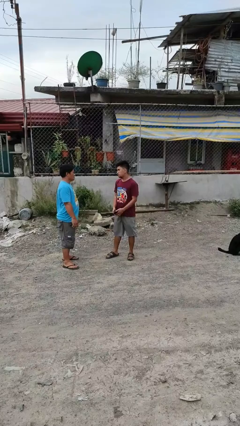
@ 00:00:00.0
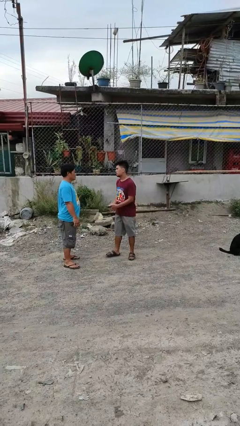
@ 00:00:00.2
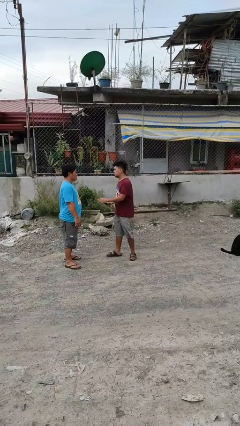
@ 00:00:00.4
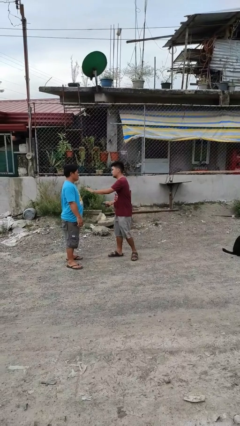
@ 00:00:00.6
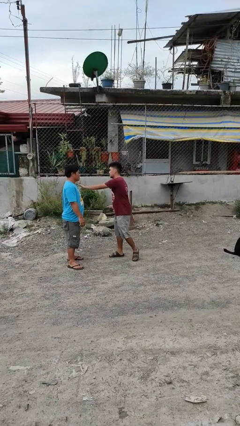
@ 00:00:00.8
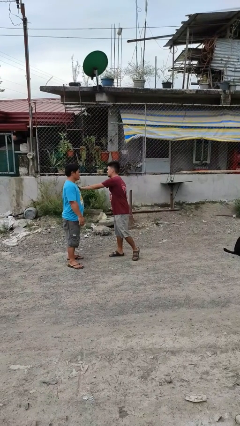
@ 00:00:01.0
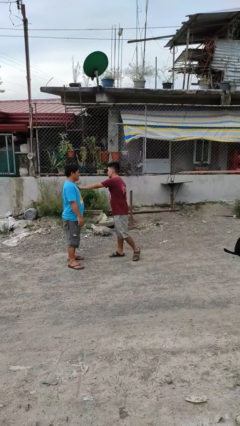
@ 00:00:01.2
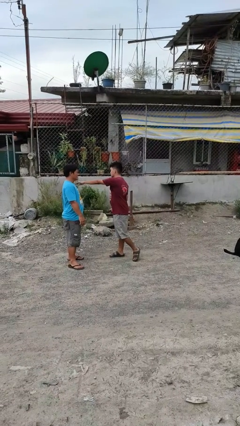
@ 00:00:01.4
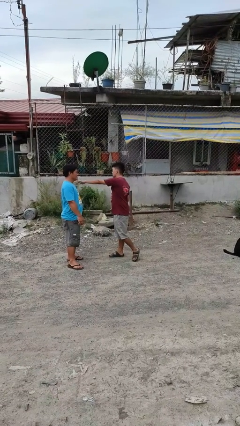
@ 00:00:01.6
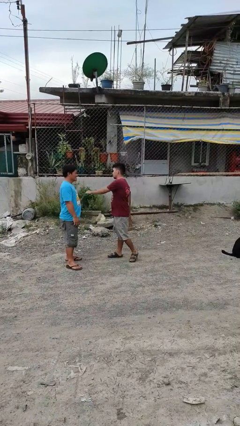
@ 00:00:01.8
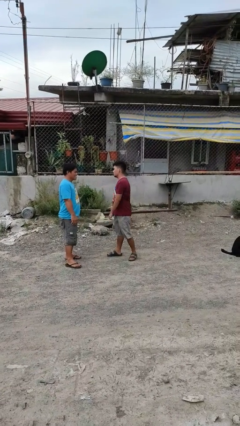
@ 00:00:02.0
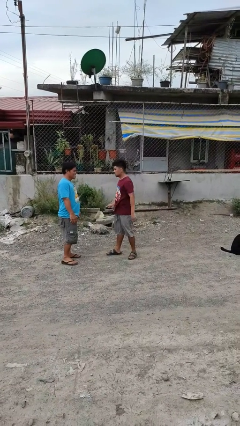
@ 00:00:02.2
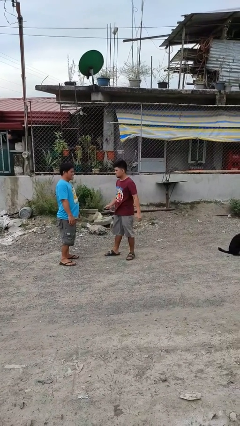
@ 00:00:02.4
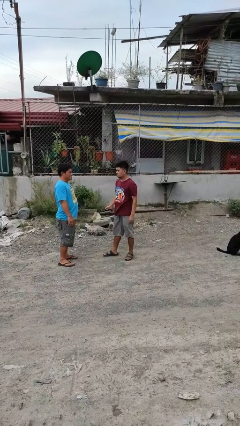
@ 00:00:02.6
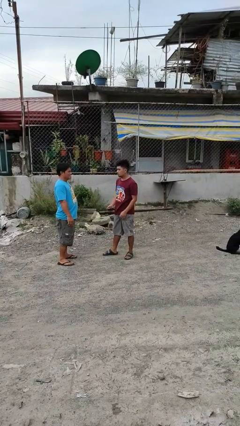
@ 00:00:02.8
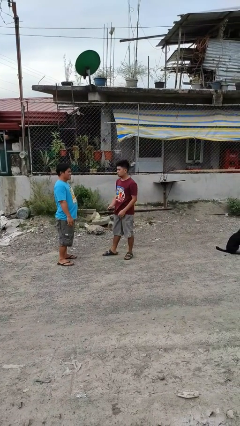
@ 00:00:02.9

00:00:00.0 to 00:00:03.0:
person shoves person

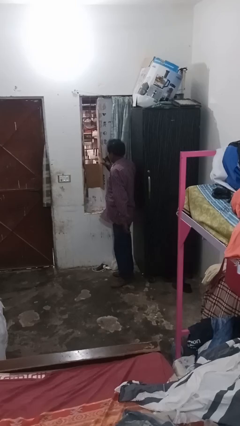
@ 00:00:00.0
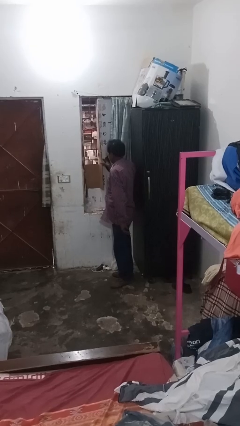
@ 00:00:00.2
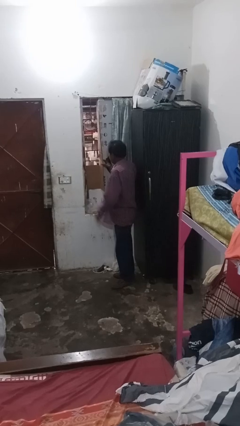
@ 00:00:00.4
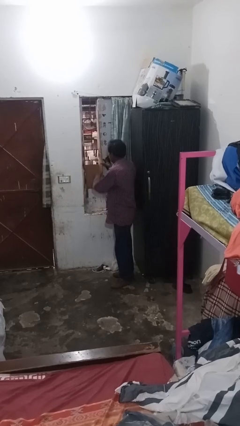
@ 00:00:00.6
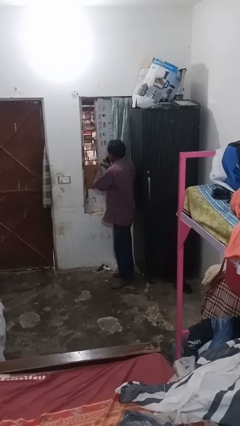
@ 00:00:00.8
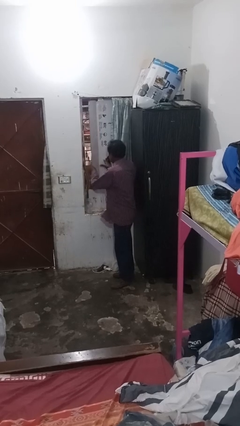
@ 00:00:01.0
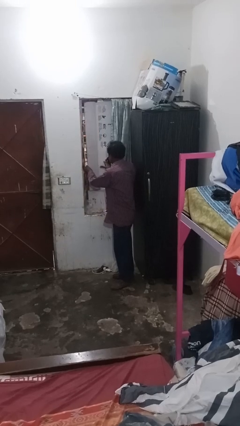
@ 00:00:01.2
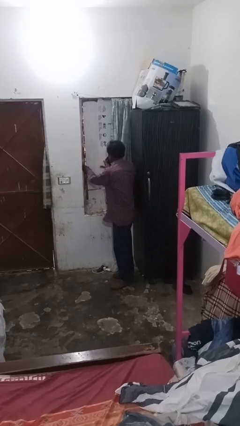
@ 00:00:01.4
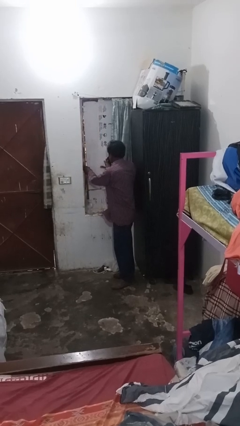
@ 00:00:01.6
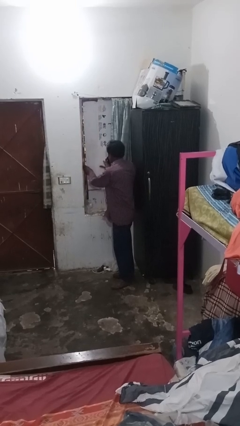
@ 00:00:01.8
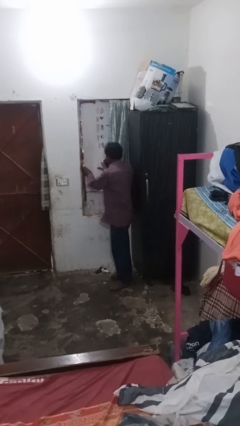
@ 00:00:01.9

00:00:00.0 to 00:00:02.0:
person closes home window

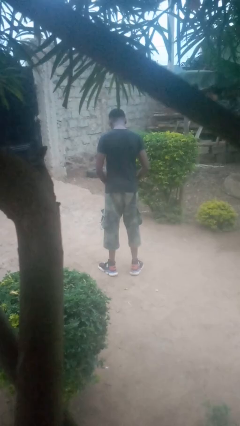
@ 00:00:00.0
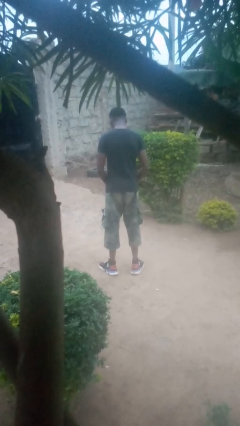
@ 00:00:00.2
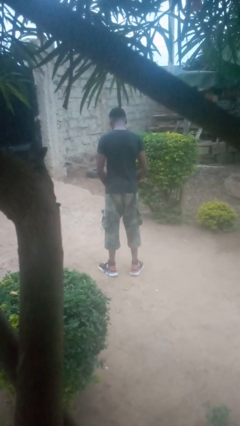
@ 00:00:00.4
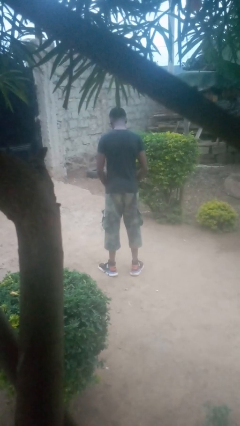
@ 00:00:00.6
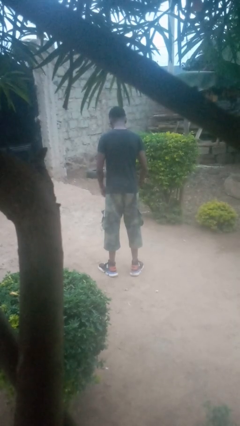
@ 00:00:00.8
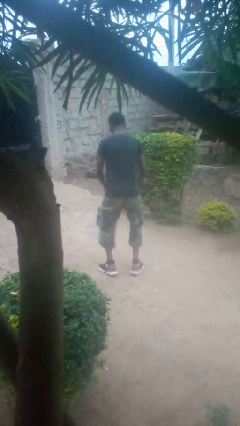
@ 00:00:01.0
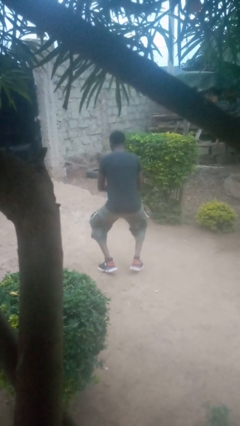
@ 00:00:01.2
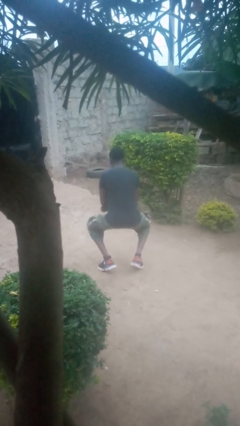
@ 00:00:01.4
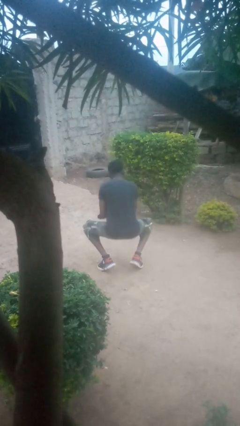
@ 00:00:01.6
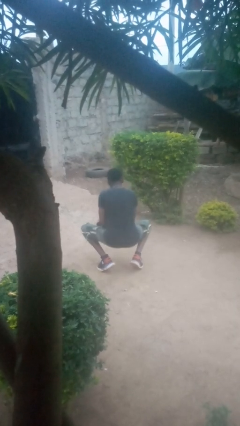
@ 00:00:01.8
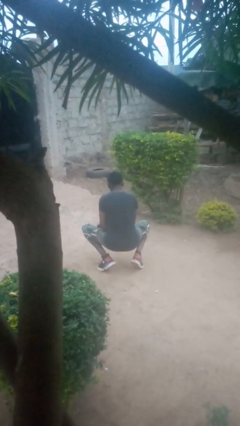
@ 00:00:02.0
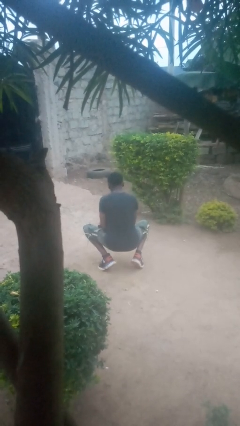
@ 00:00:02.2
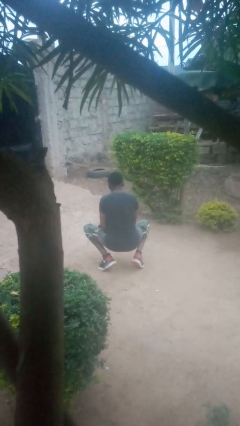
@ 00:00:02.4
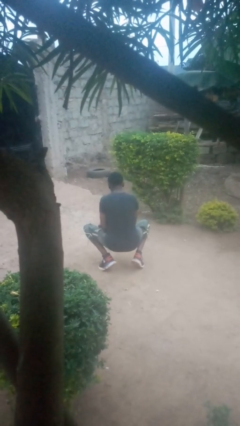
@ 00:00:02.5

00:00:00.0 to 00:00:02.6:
person squats

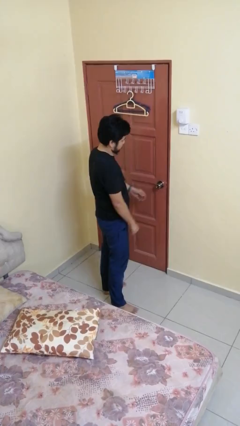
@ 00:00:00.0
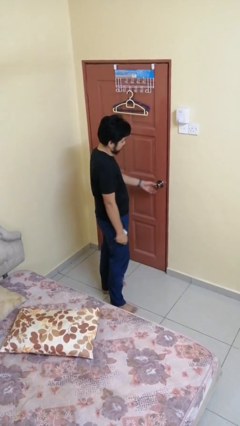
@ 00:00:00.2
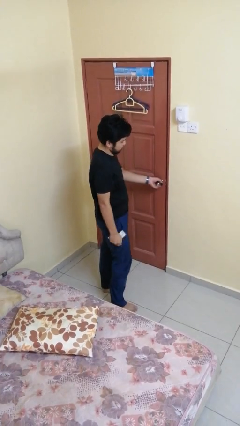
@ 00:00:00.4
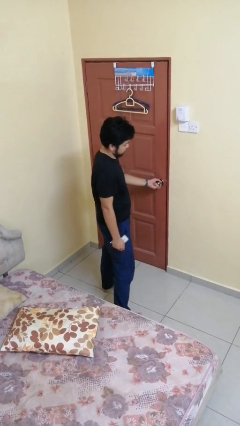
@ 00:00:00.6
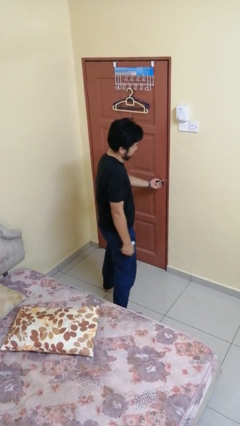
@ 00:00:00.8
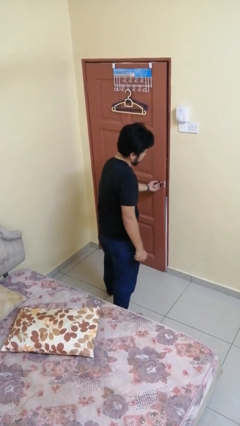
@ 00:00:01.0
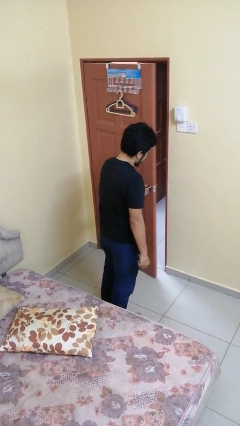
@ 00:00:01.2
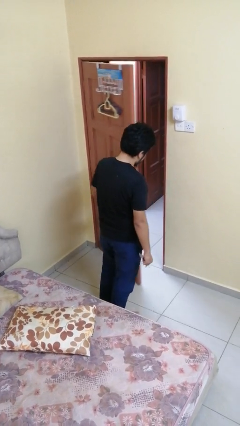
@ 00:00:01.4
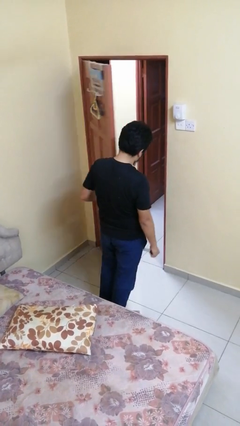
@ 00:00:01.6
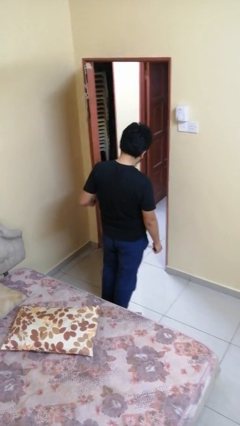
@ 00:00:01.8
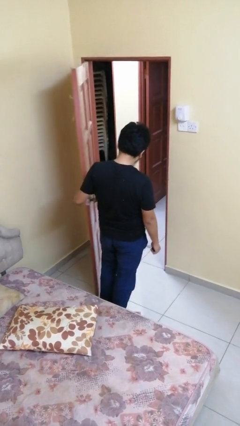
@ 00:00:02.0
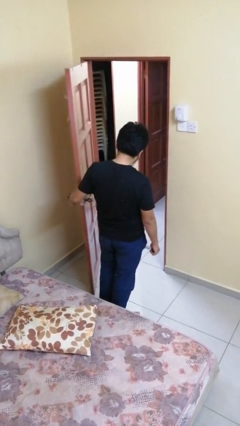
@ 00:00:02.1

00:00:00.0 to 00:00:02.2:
person opens facility door

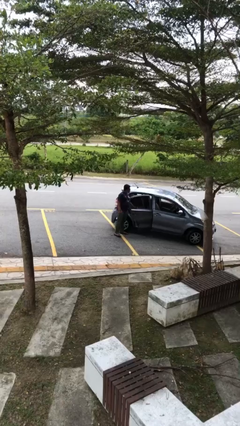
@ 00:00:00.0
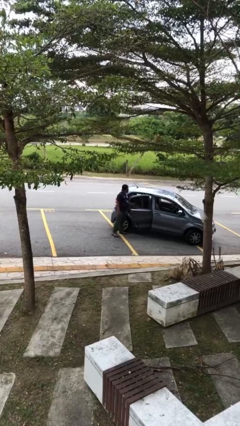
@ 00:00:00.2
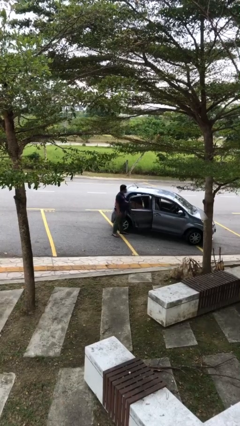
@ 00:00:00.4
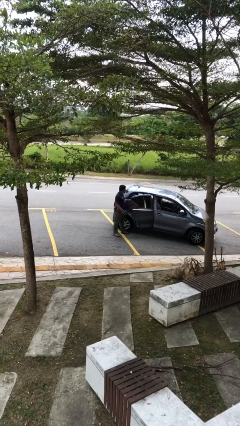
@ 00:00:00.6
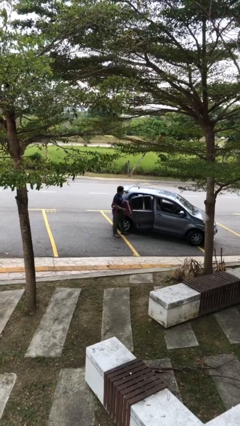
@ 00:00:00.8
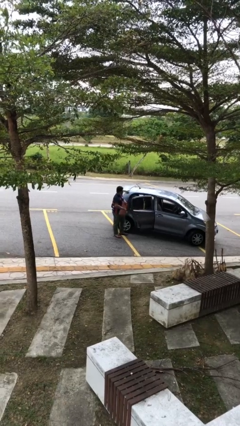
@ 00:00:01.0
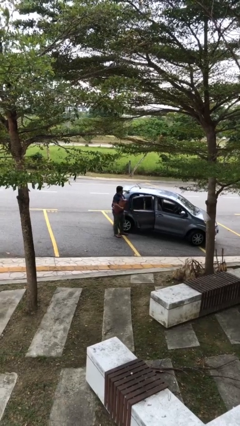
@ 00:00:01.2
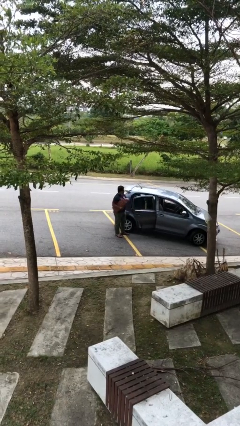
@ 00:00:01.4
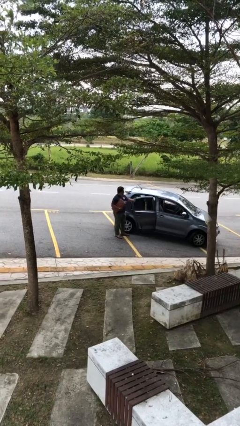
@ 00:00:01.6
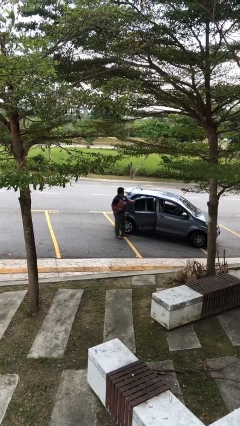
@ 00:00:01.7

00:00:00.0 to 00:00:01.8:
person unloads car

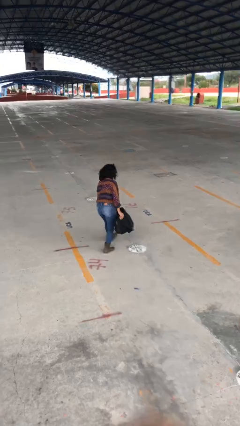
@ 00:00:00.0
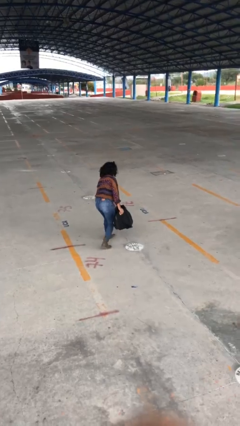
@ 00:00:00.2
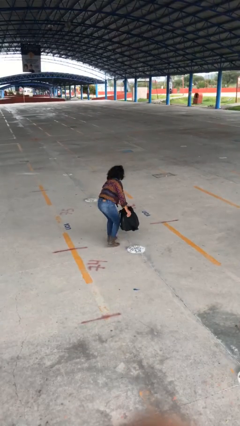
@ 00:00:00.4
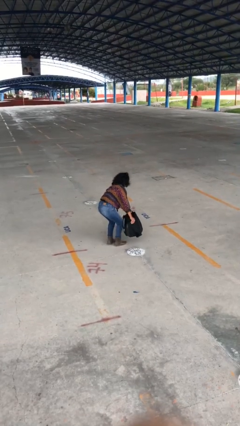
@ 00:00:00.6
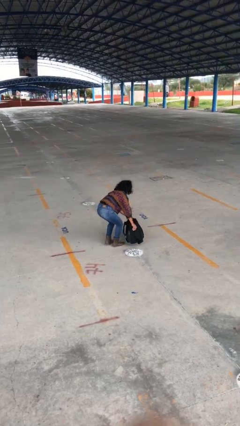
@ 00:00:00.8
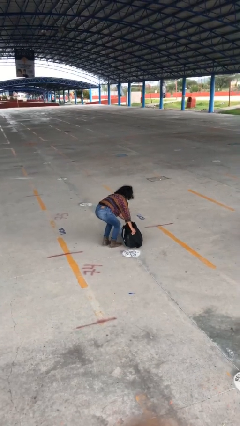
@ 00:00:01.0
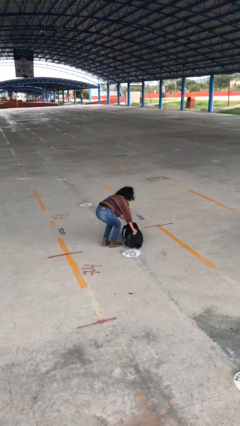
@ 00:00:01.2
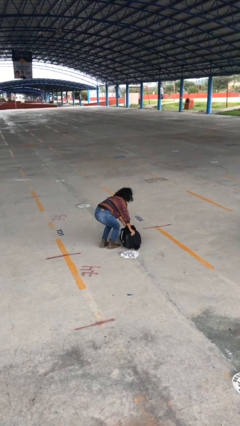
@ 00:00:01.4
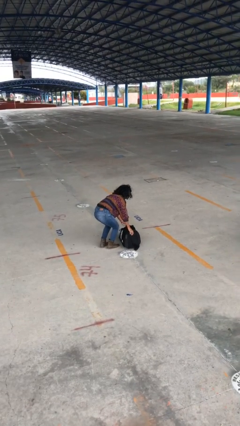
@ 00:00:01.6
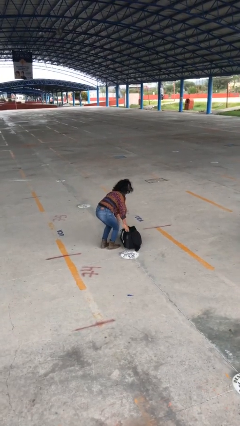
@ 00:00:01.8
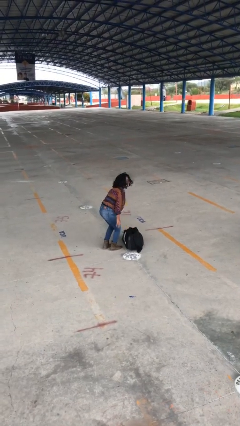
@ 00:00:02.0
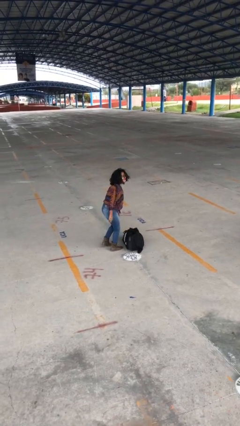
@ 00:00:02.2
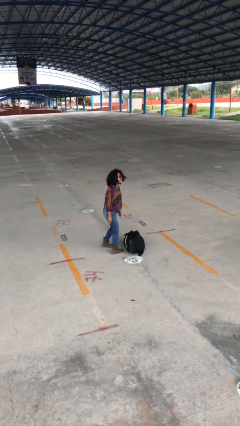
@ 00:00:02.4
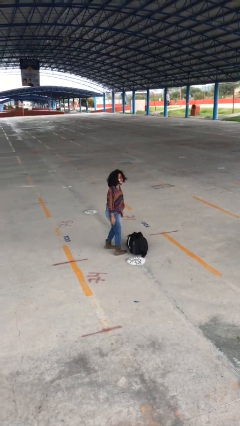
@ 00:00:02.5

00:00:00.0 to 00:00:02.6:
person puts down object on floor

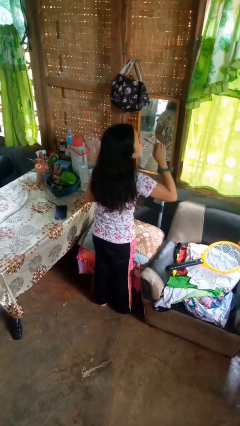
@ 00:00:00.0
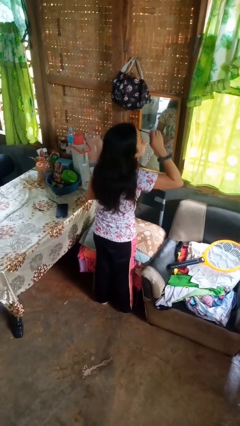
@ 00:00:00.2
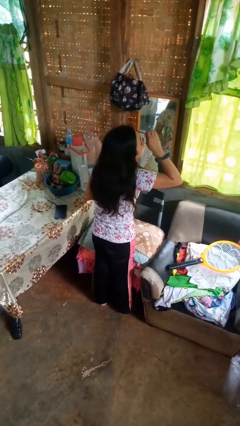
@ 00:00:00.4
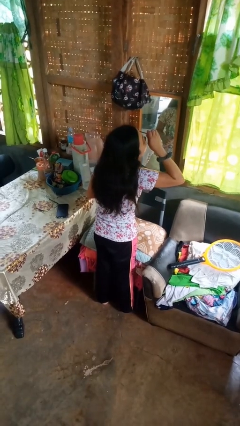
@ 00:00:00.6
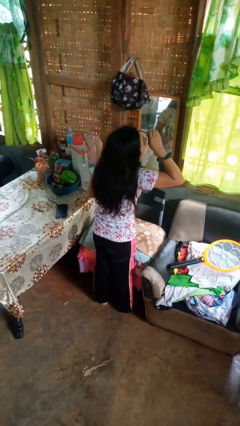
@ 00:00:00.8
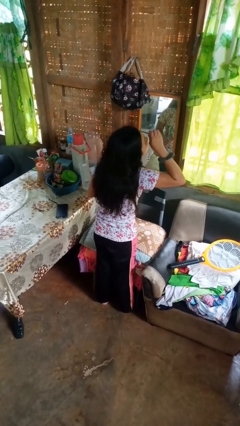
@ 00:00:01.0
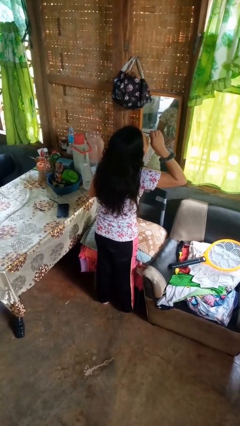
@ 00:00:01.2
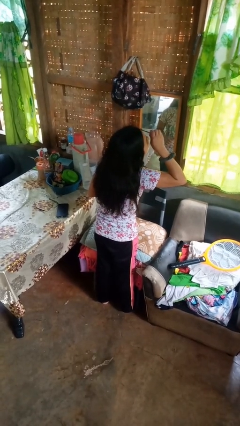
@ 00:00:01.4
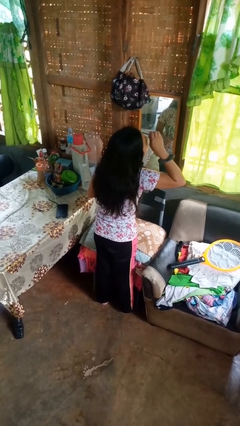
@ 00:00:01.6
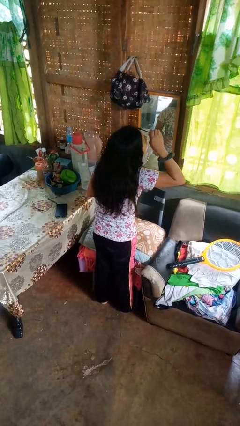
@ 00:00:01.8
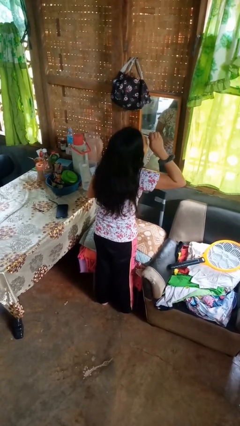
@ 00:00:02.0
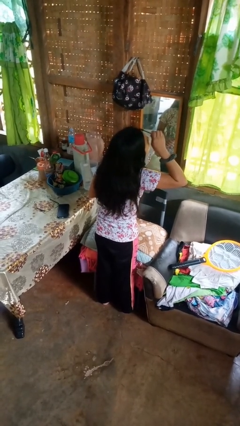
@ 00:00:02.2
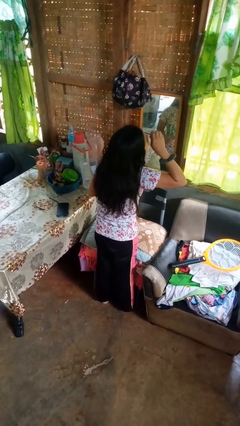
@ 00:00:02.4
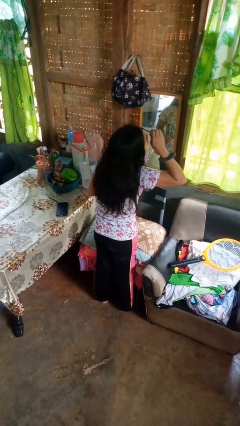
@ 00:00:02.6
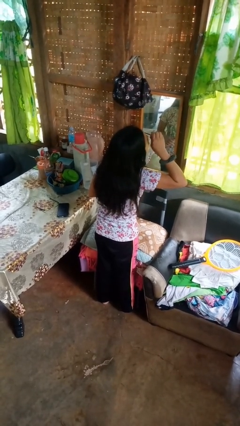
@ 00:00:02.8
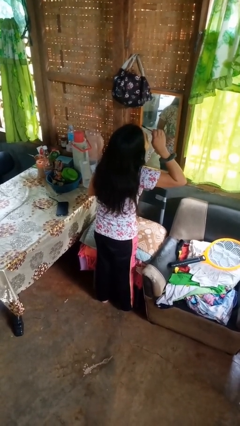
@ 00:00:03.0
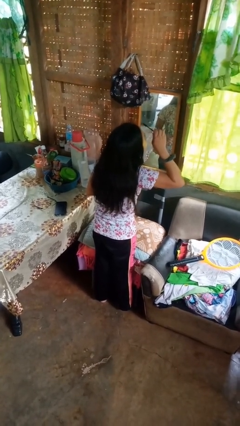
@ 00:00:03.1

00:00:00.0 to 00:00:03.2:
person applies eye makeup
